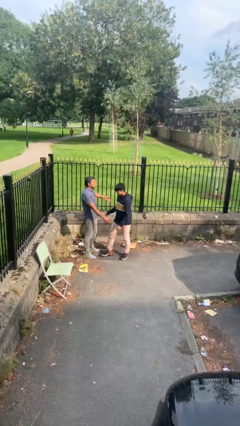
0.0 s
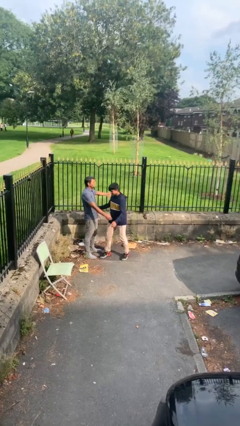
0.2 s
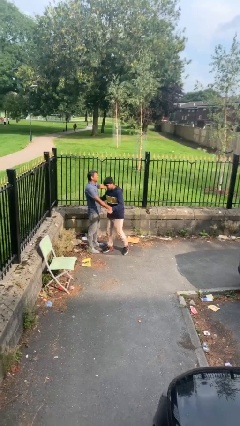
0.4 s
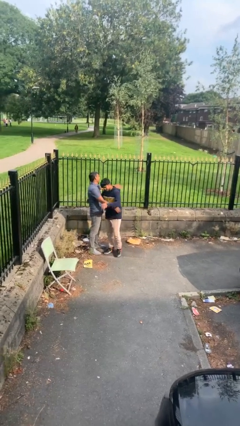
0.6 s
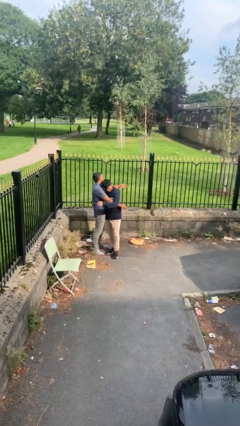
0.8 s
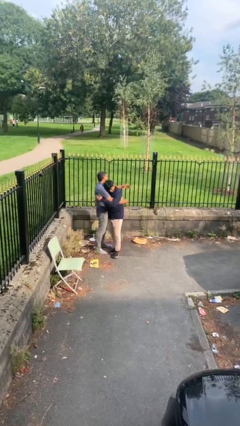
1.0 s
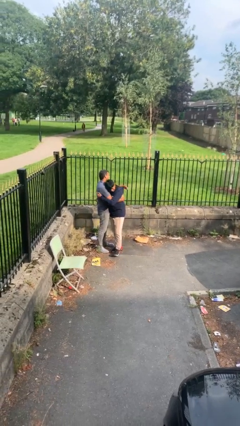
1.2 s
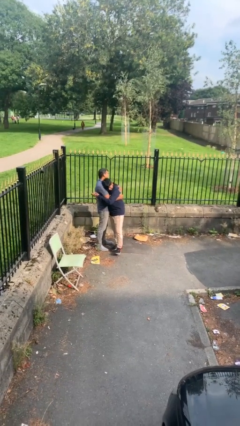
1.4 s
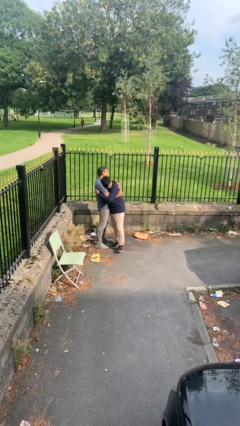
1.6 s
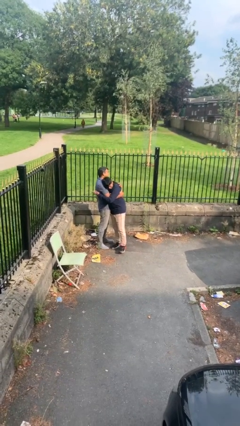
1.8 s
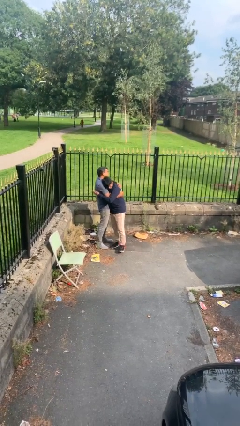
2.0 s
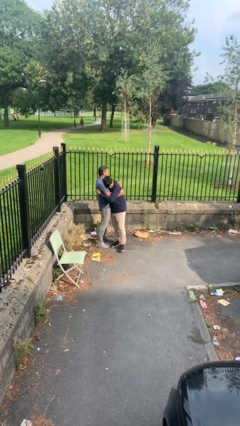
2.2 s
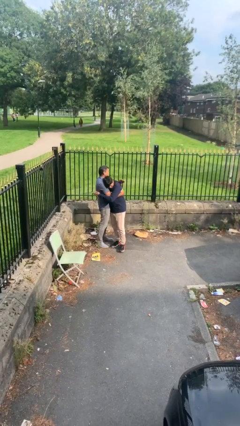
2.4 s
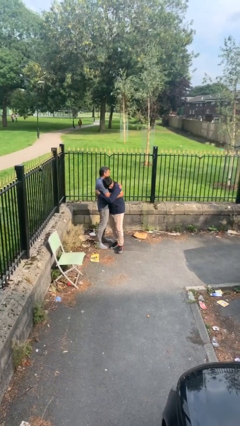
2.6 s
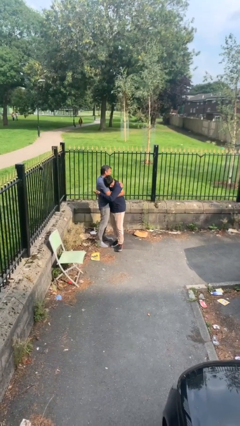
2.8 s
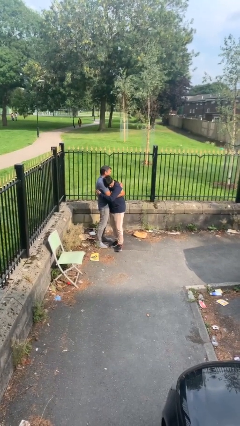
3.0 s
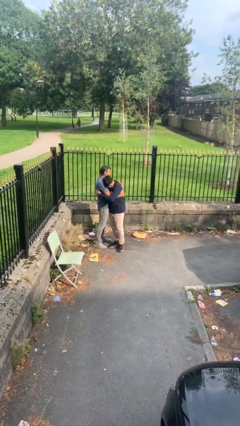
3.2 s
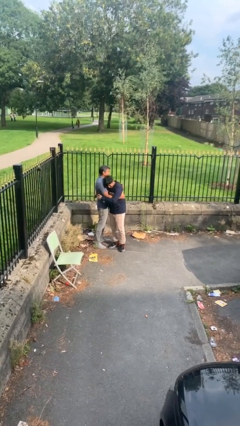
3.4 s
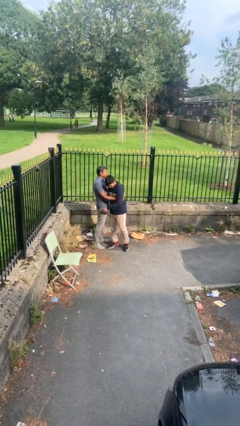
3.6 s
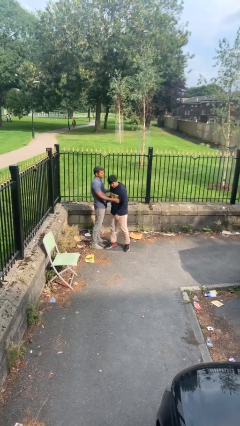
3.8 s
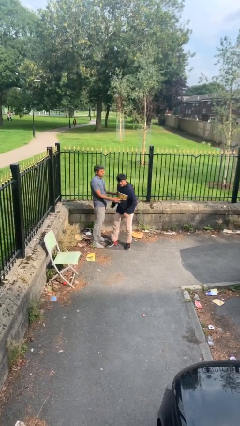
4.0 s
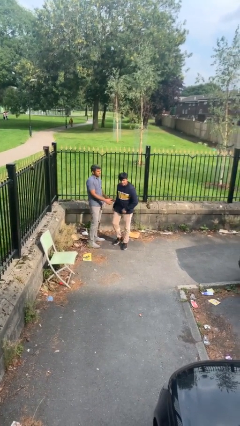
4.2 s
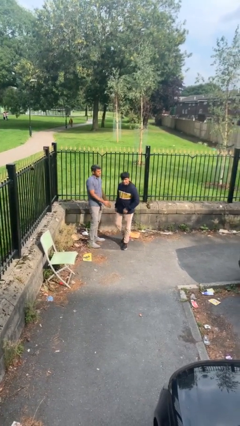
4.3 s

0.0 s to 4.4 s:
person embraces person

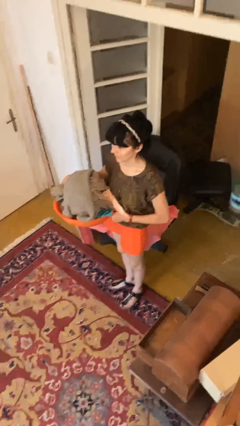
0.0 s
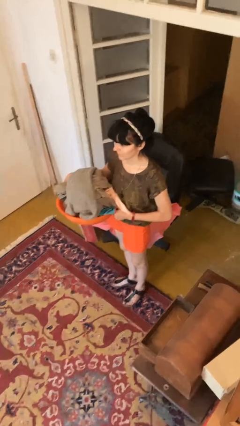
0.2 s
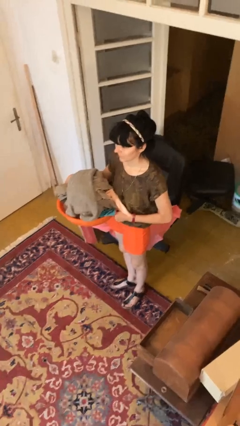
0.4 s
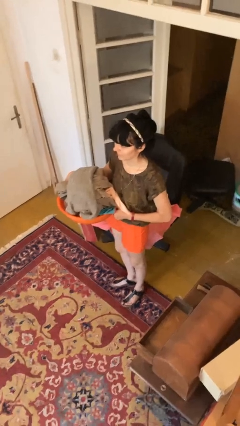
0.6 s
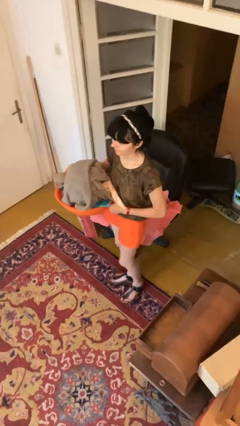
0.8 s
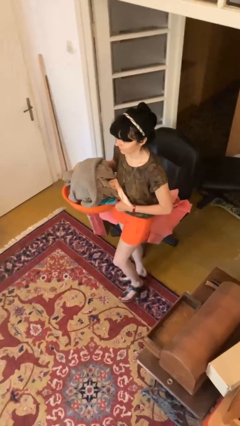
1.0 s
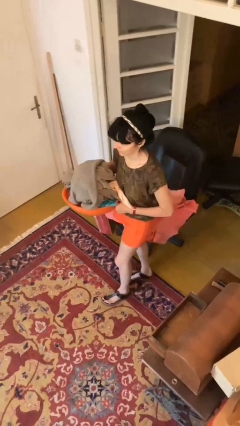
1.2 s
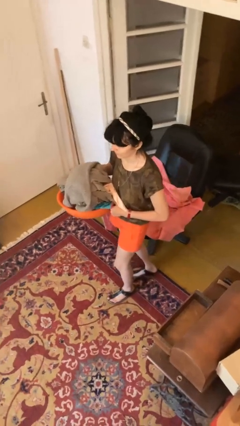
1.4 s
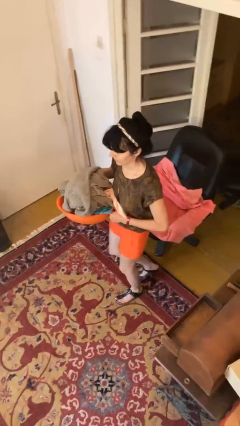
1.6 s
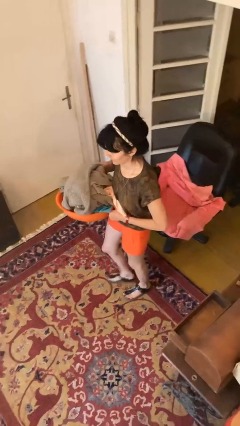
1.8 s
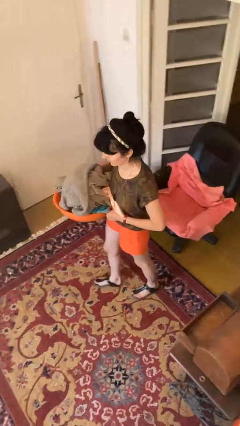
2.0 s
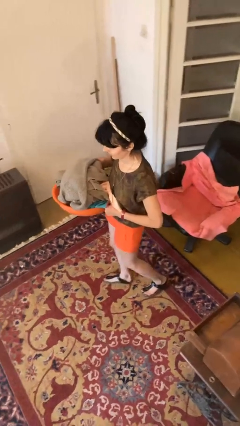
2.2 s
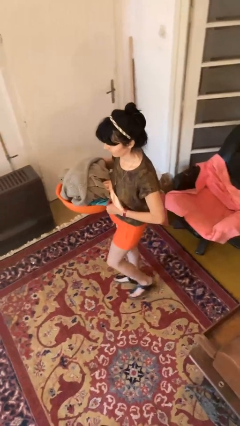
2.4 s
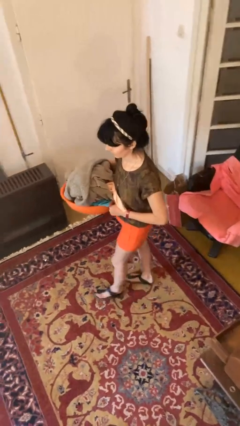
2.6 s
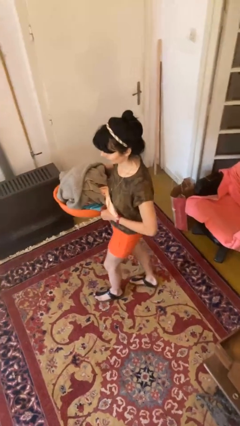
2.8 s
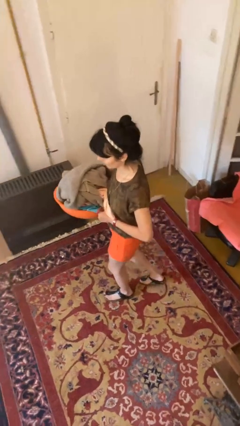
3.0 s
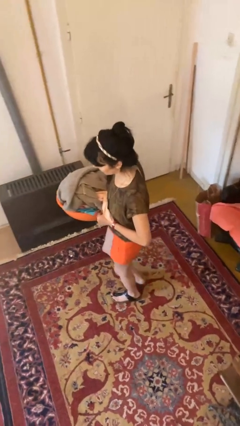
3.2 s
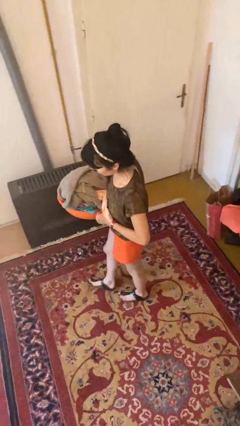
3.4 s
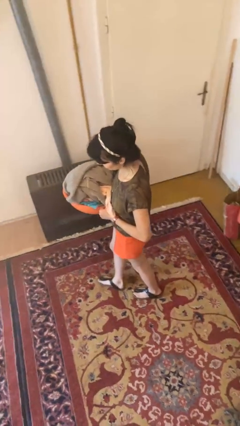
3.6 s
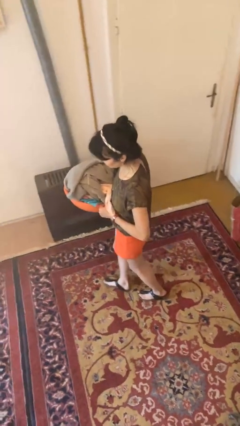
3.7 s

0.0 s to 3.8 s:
person carries laundry basket

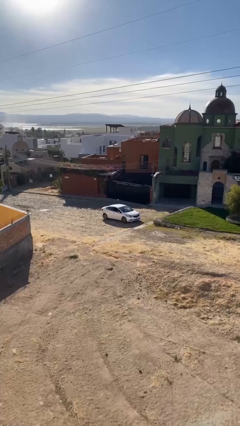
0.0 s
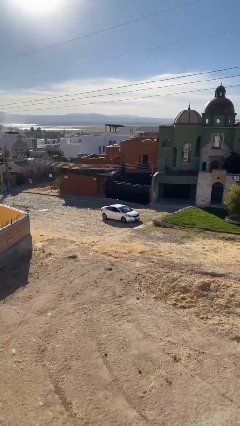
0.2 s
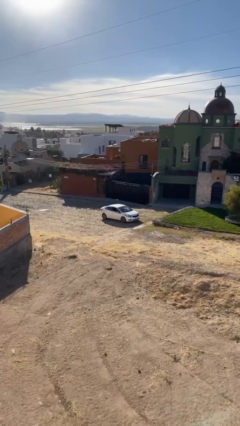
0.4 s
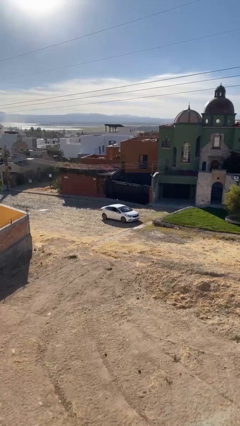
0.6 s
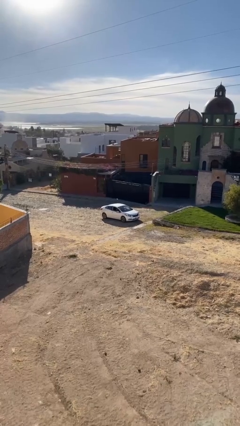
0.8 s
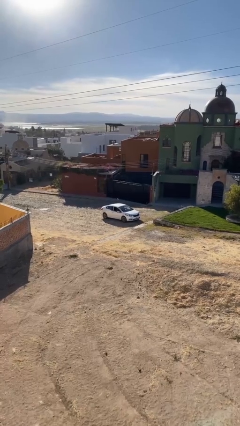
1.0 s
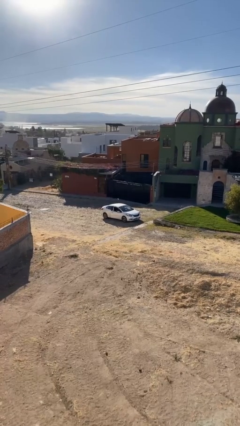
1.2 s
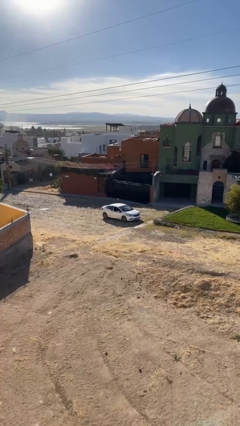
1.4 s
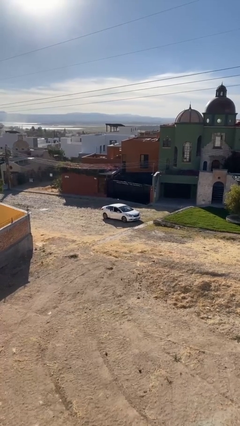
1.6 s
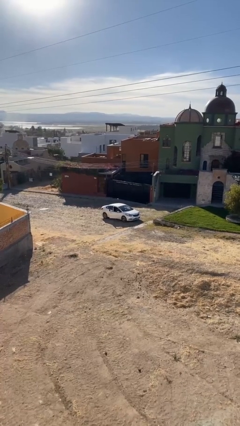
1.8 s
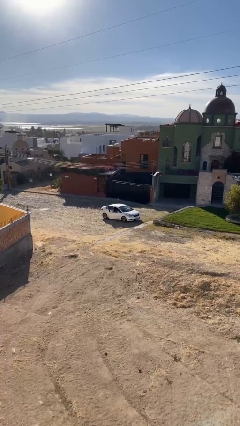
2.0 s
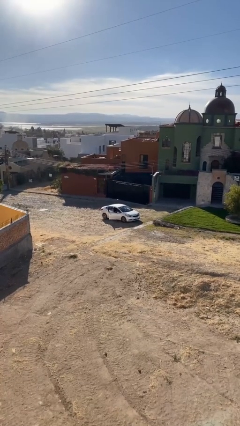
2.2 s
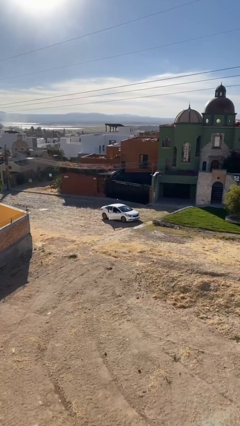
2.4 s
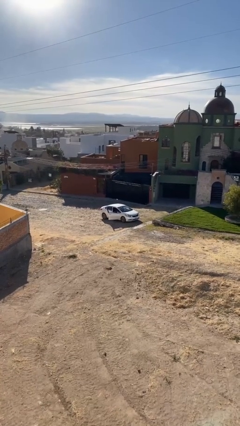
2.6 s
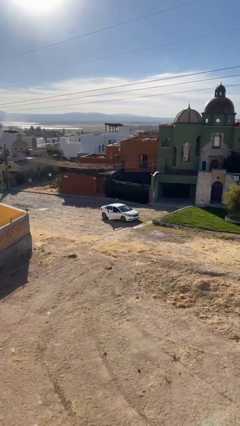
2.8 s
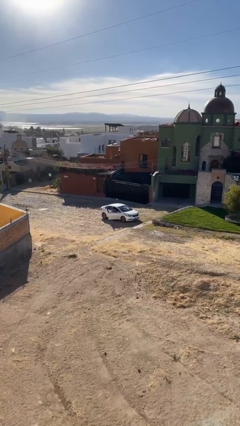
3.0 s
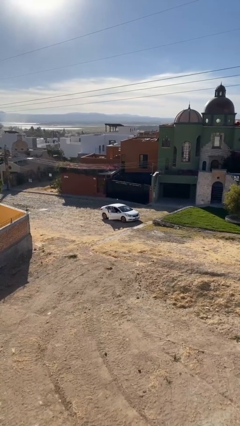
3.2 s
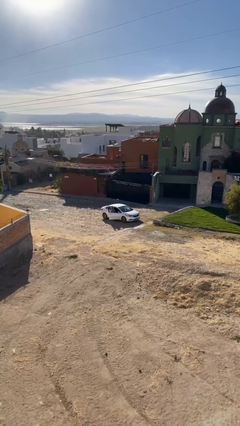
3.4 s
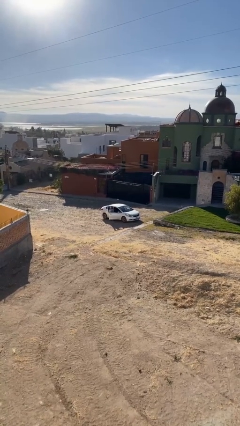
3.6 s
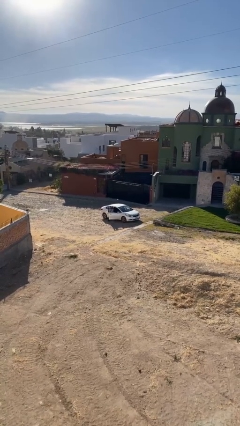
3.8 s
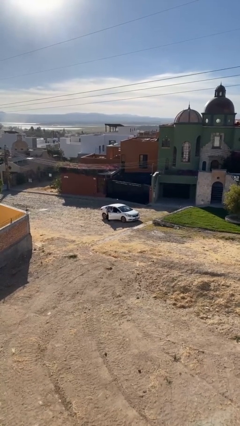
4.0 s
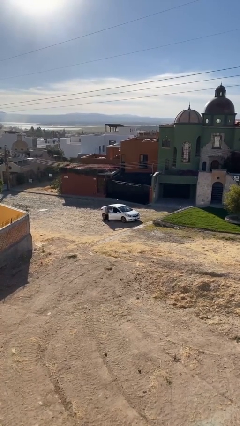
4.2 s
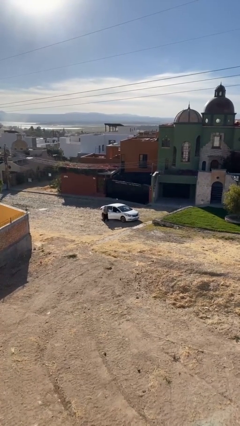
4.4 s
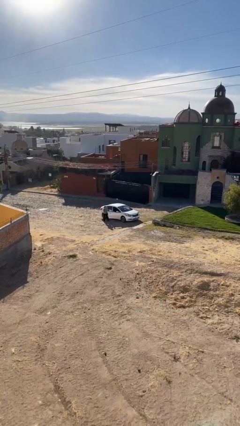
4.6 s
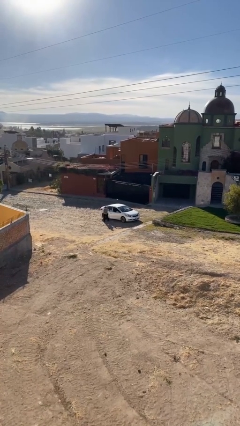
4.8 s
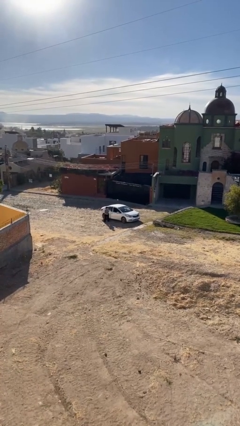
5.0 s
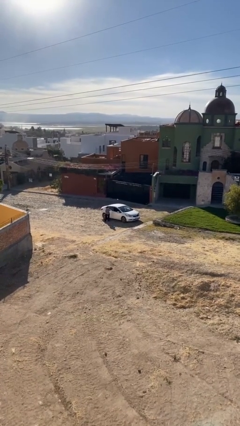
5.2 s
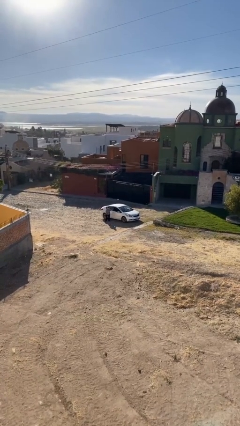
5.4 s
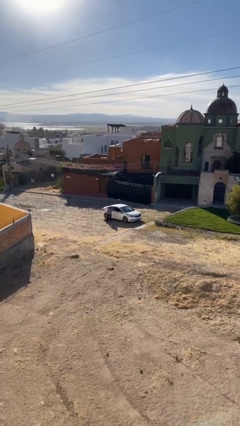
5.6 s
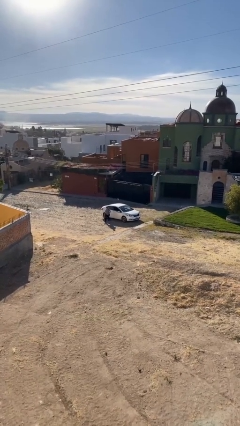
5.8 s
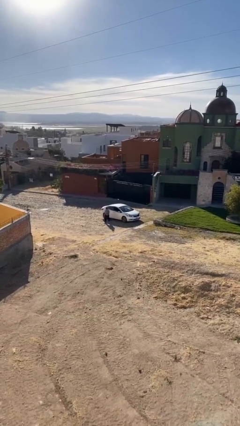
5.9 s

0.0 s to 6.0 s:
car drops off person

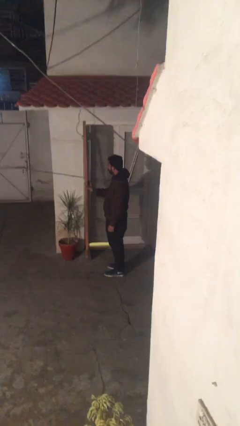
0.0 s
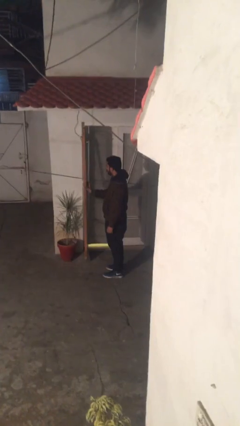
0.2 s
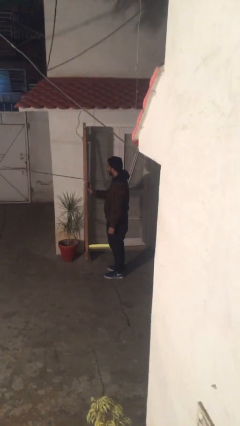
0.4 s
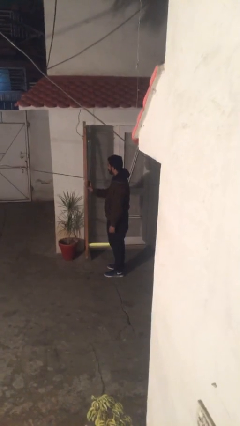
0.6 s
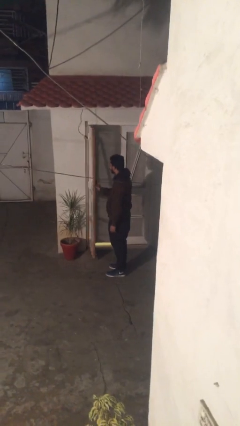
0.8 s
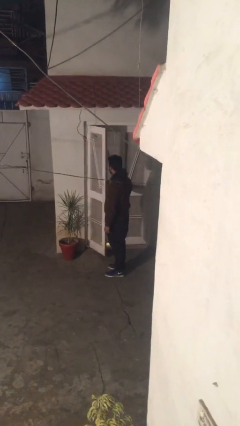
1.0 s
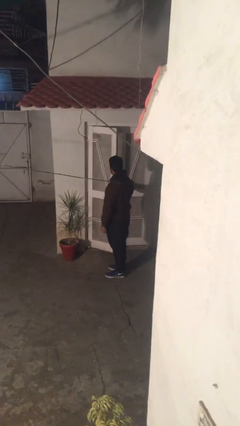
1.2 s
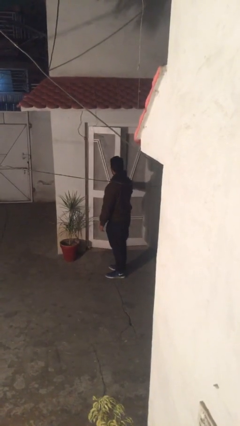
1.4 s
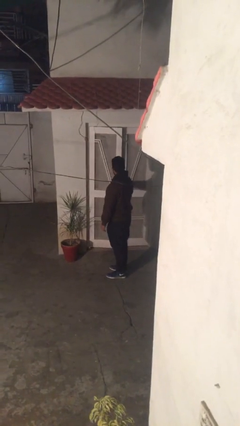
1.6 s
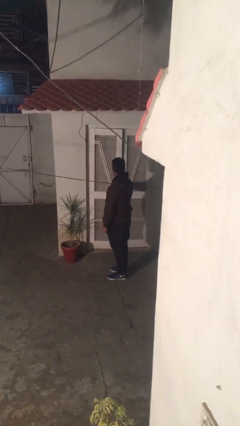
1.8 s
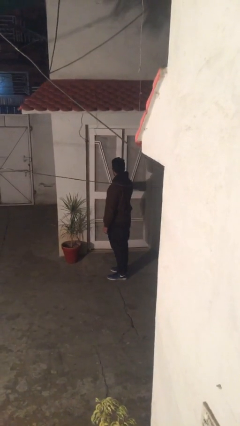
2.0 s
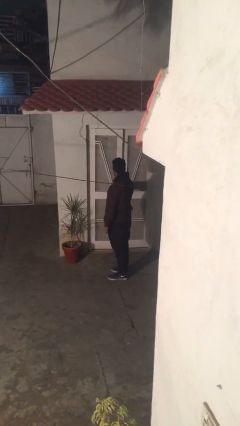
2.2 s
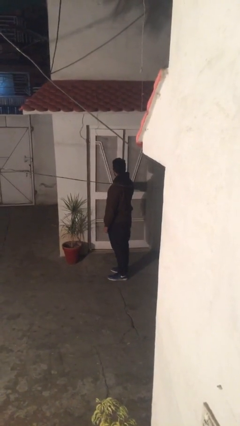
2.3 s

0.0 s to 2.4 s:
person closes facility door

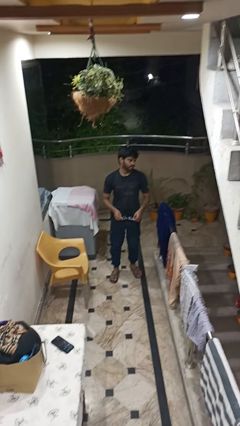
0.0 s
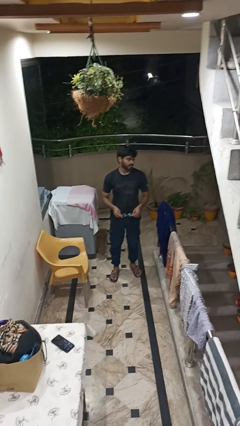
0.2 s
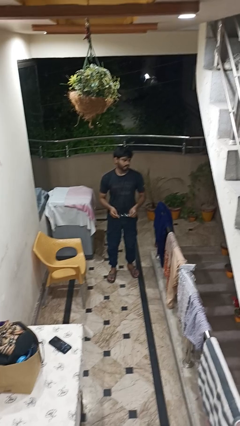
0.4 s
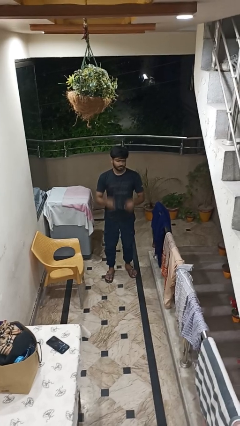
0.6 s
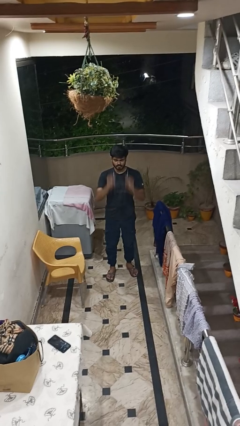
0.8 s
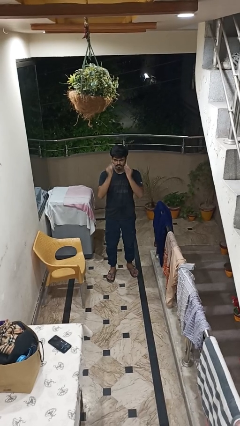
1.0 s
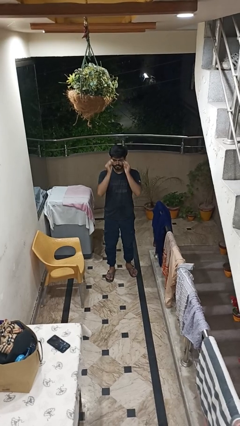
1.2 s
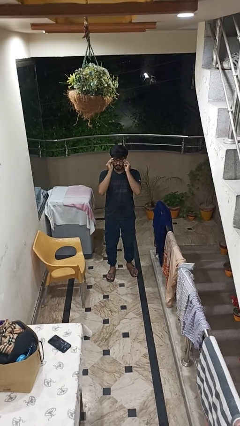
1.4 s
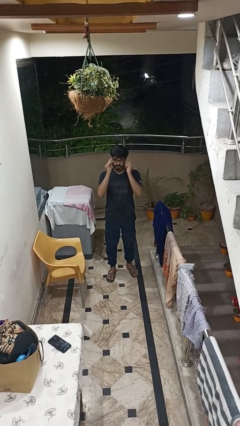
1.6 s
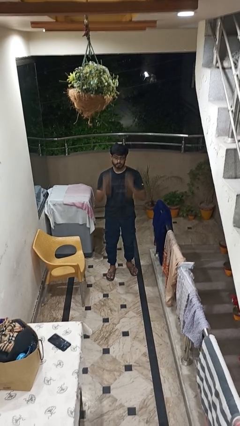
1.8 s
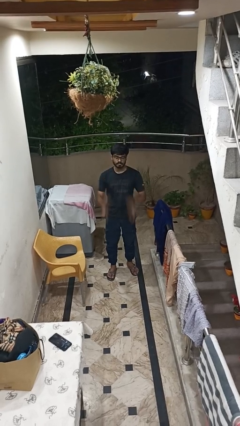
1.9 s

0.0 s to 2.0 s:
person puts on glasses
